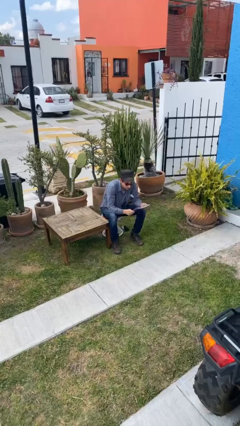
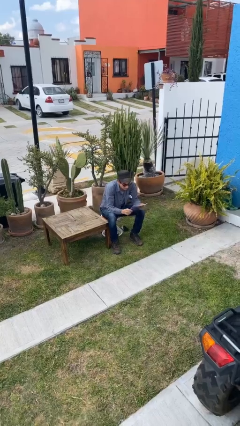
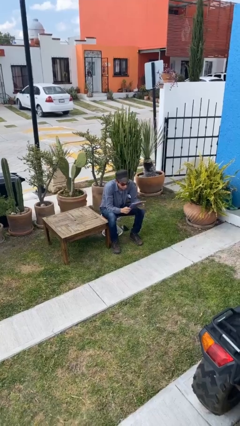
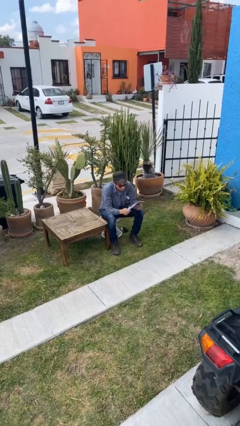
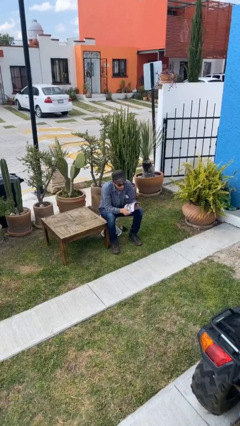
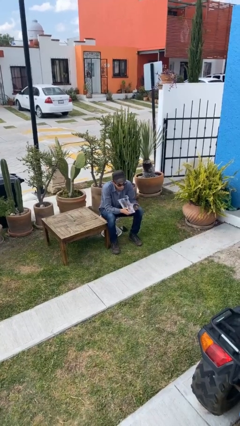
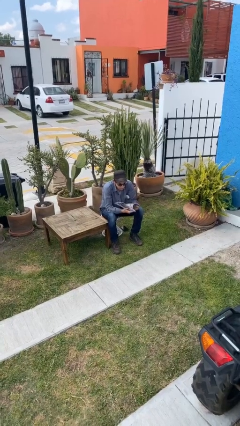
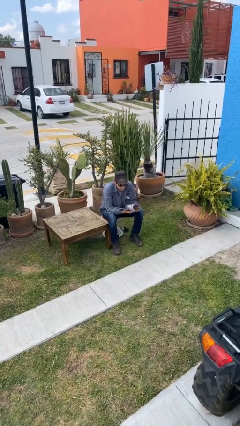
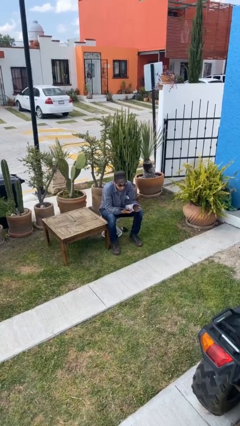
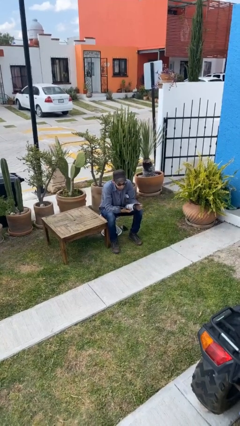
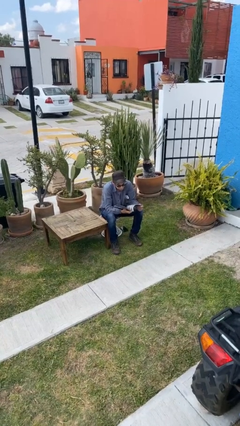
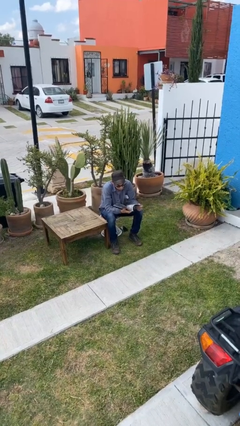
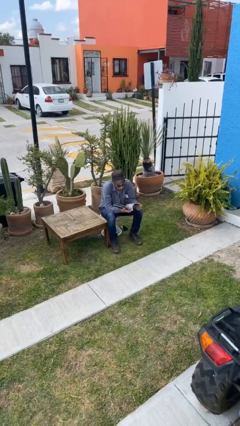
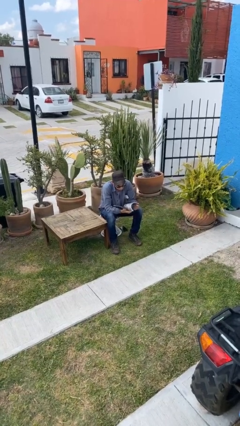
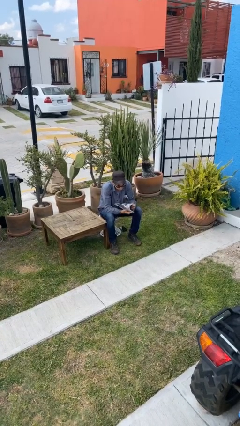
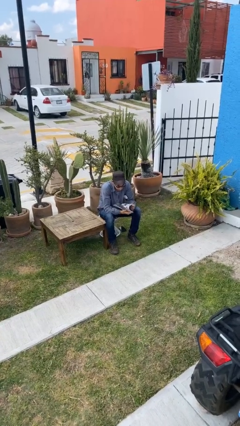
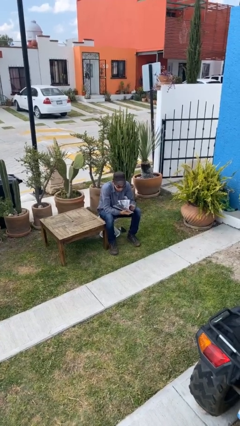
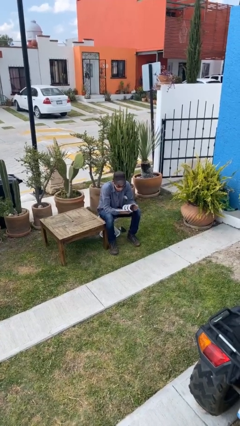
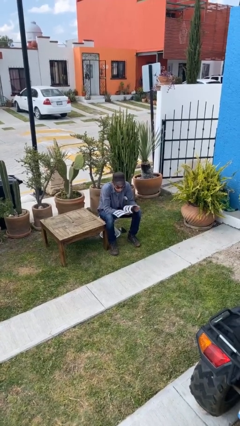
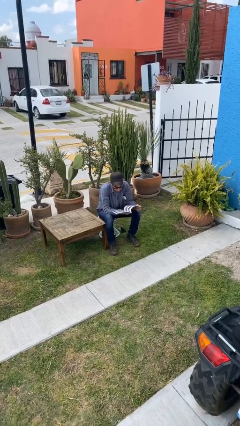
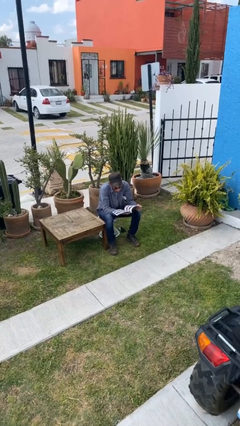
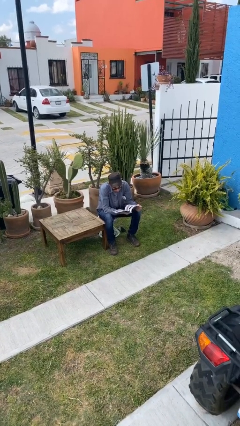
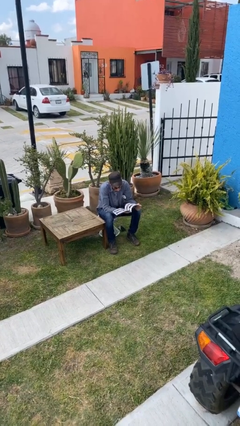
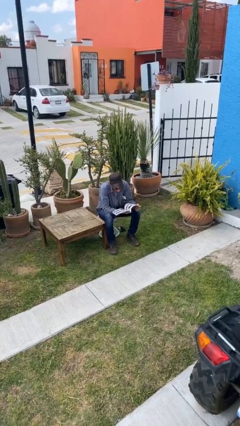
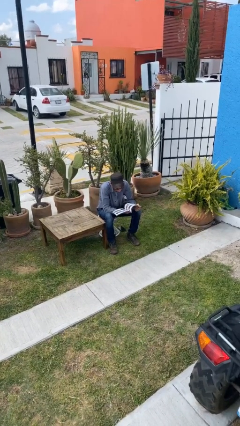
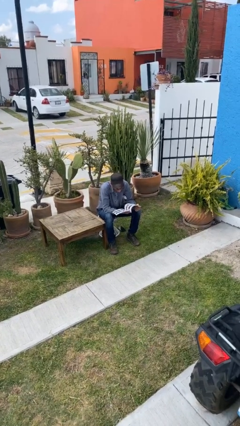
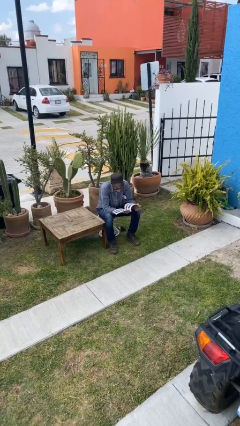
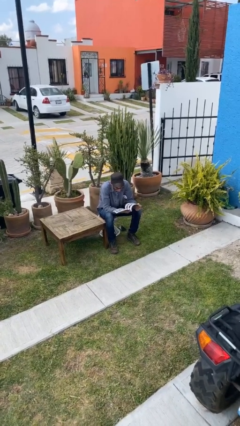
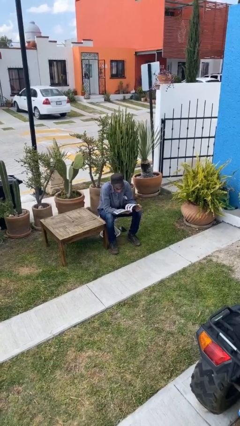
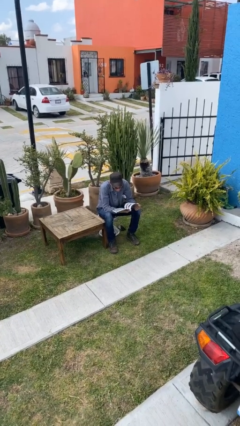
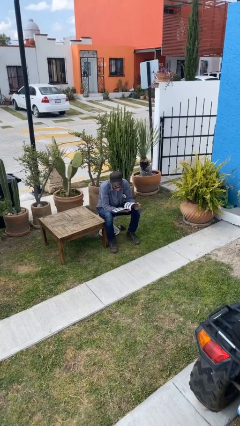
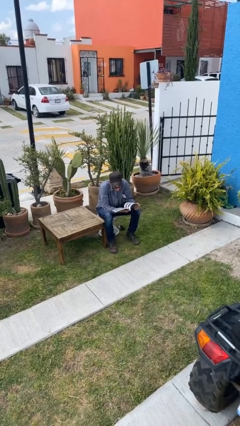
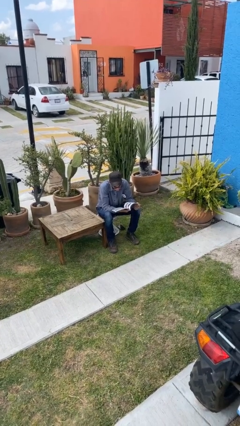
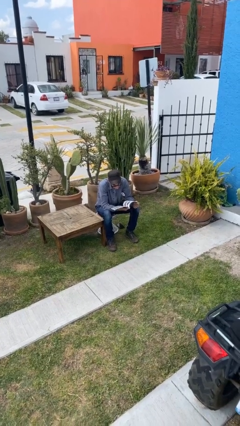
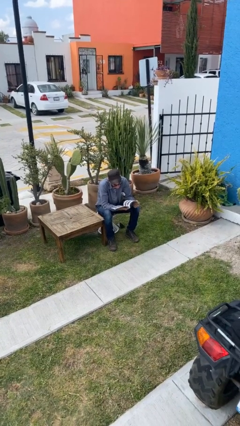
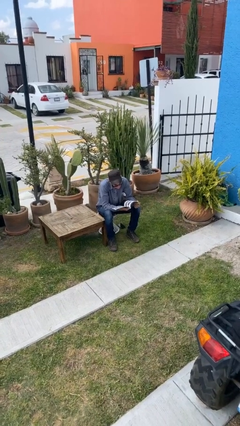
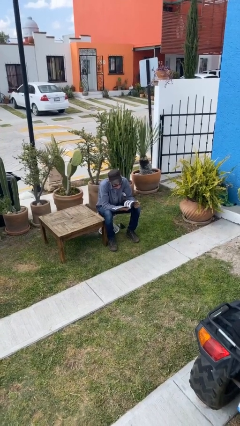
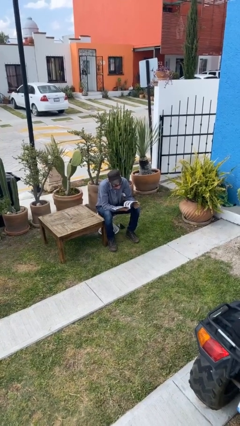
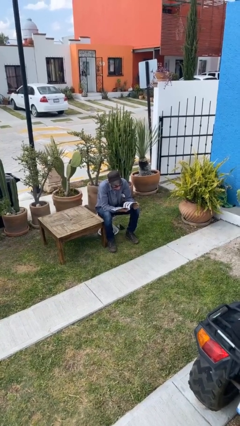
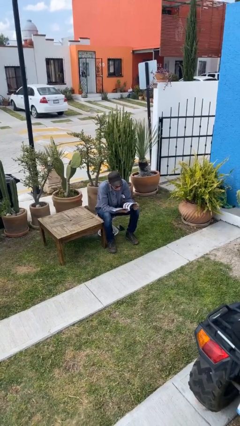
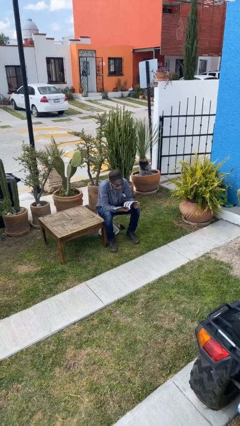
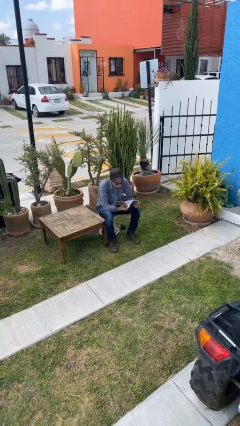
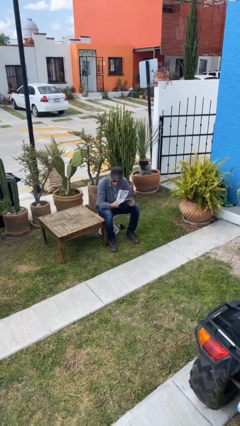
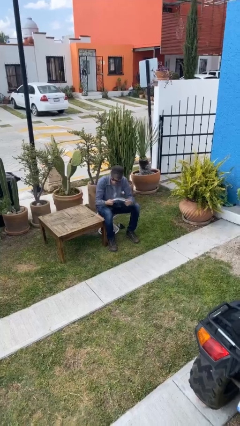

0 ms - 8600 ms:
person reads document

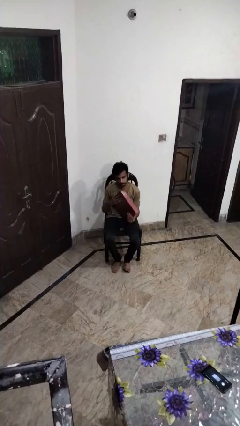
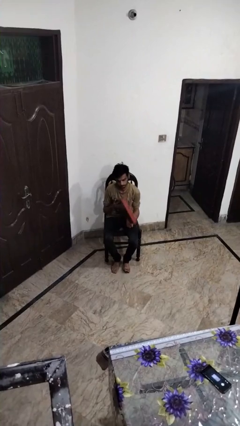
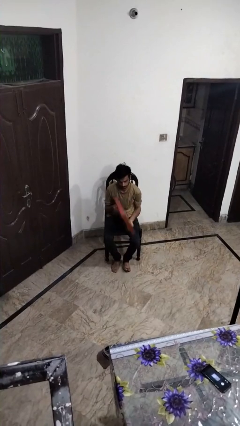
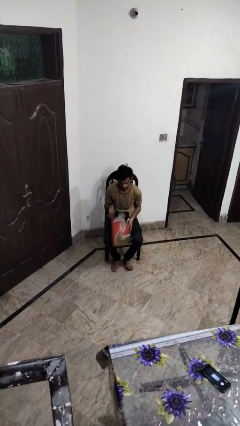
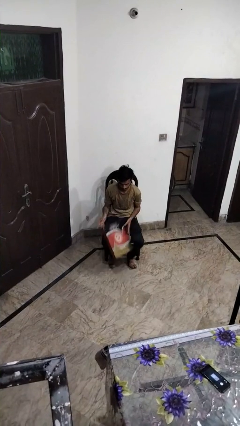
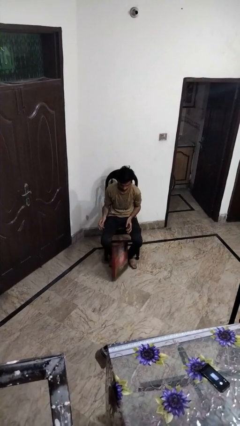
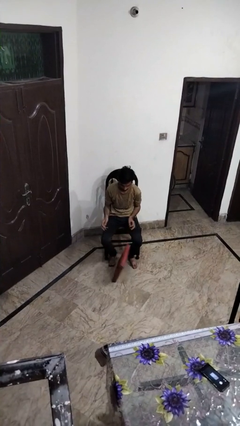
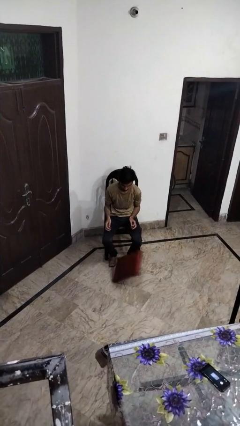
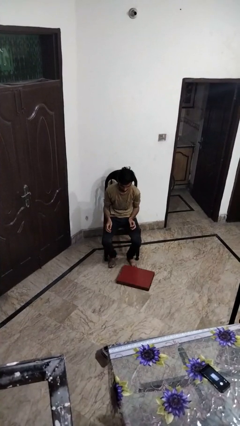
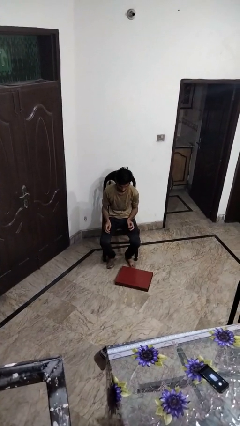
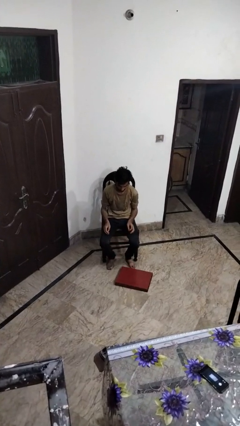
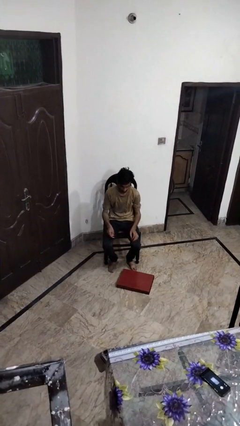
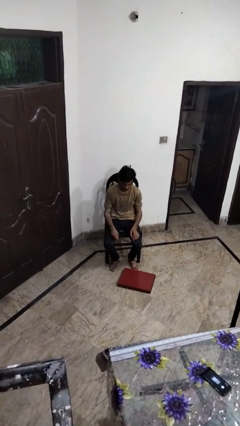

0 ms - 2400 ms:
person drops object

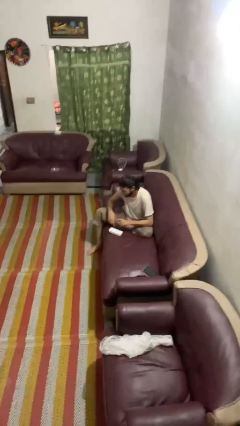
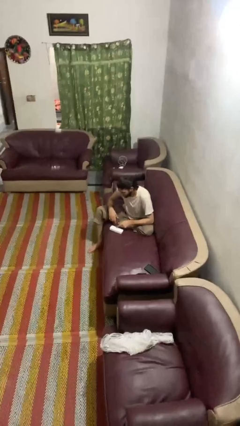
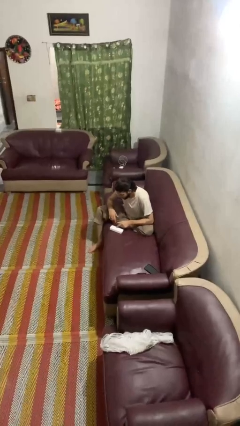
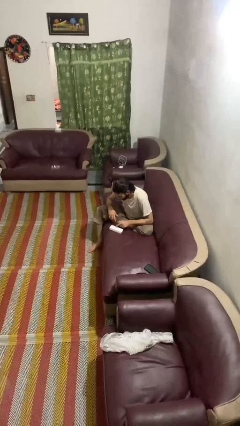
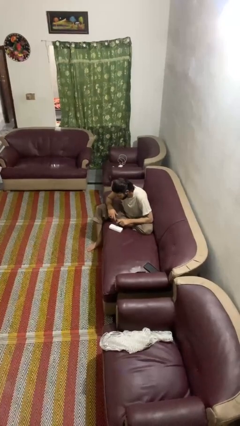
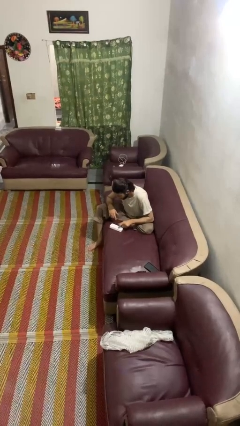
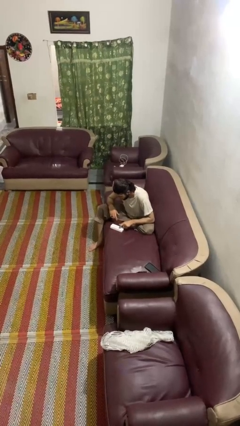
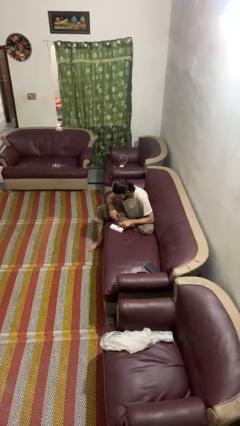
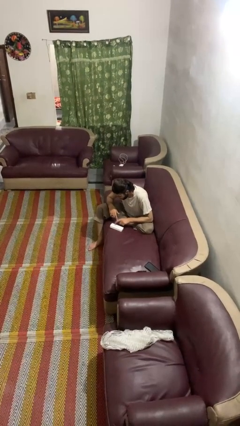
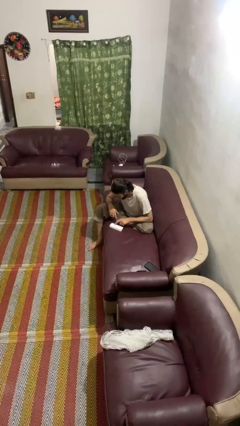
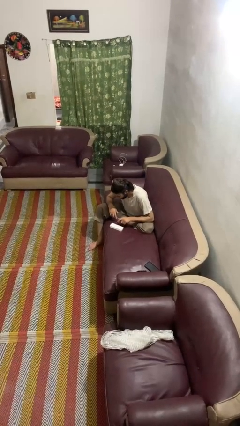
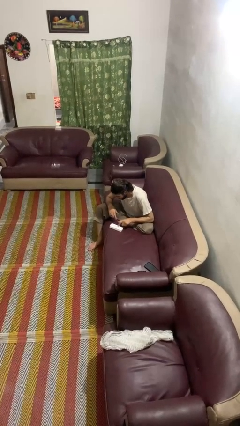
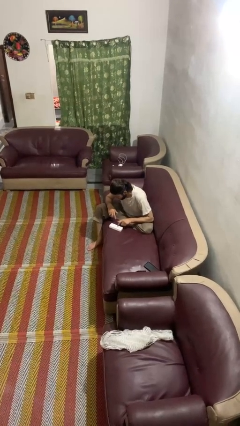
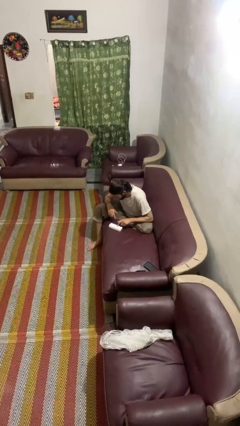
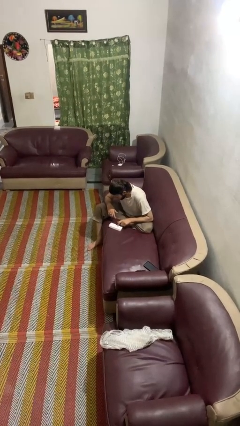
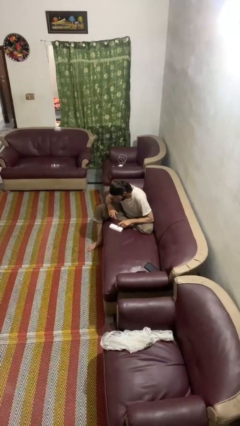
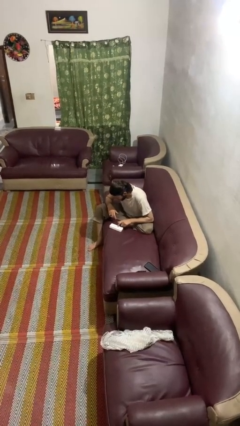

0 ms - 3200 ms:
person taps object with finger

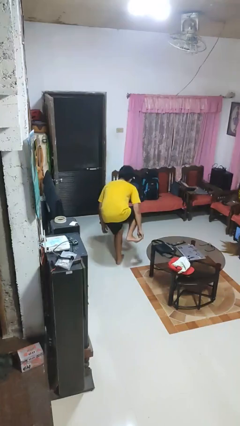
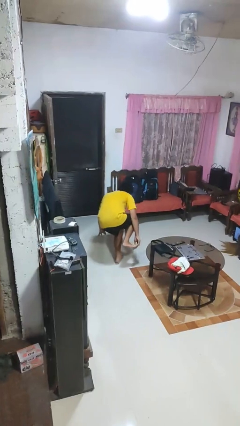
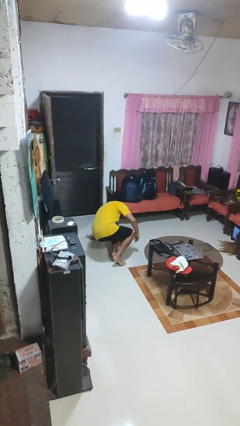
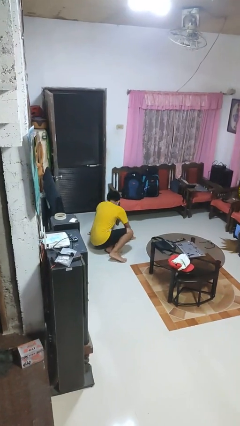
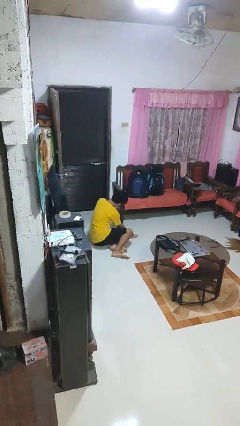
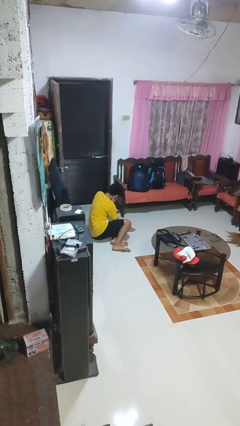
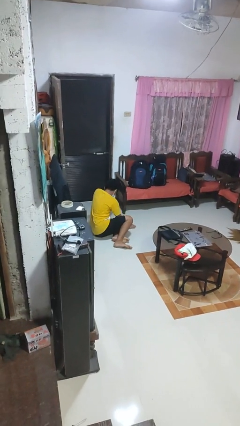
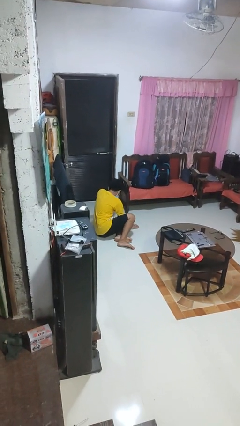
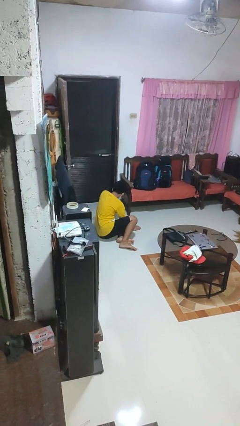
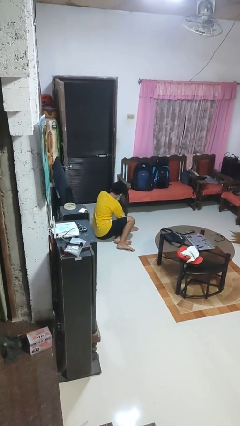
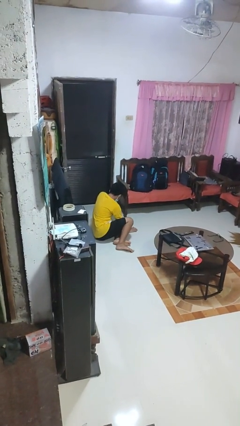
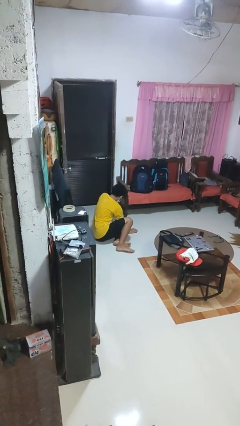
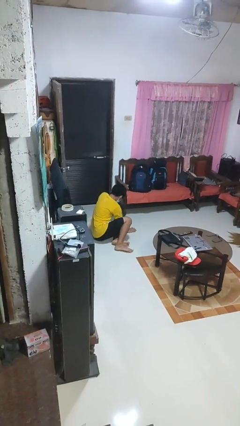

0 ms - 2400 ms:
person lies down on floor

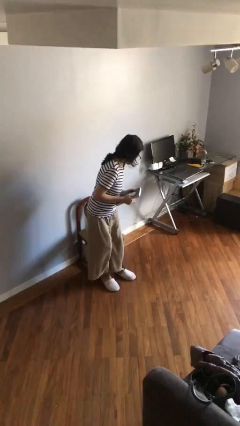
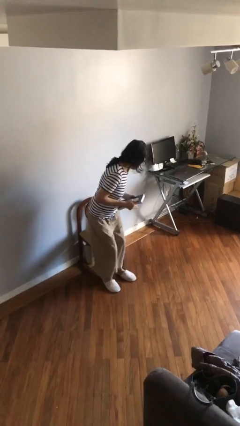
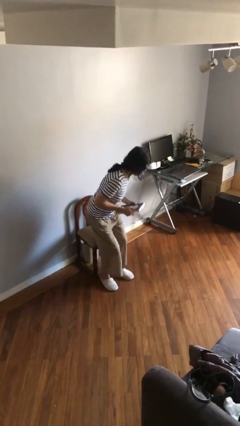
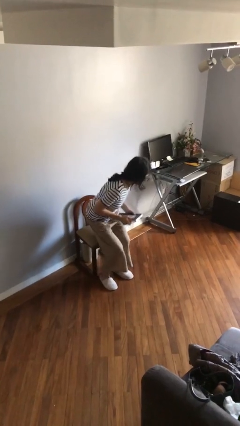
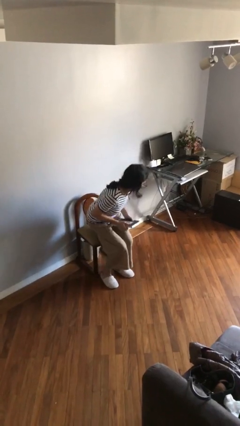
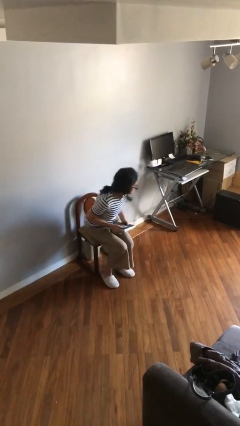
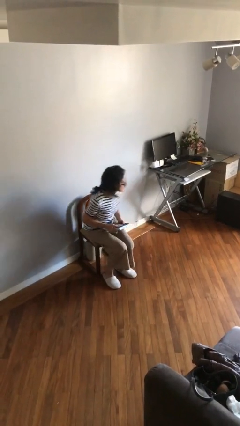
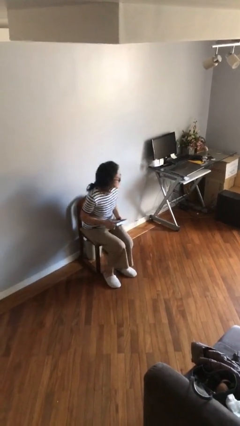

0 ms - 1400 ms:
person sits down

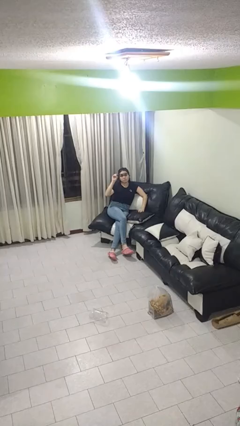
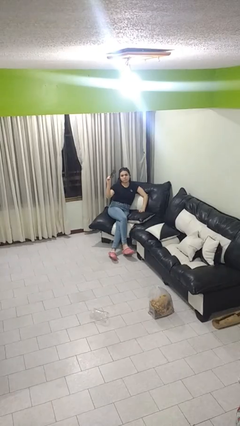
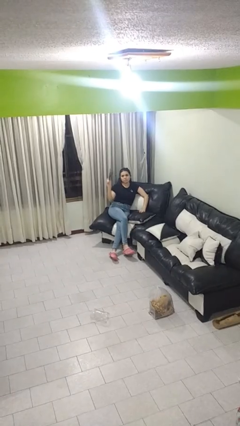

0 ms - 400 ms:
person takes off sunglasses
